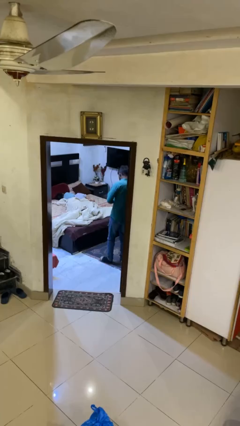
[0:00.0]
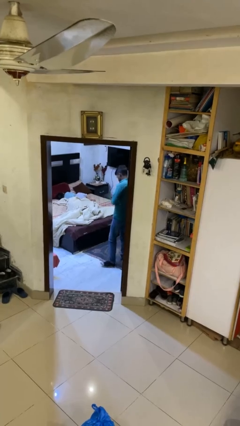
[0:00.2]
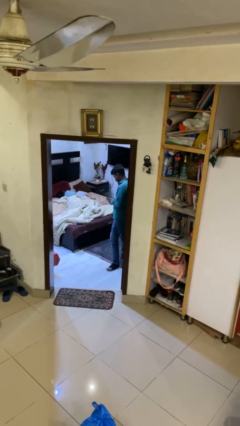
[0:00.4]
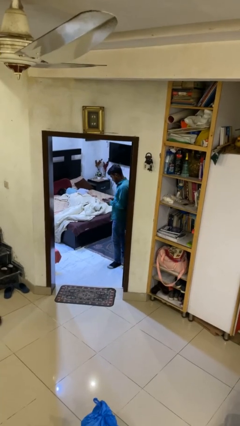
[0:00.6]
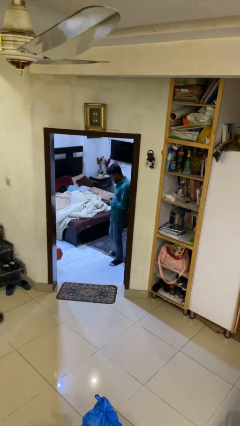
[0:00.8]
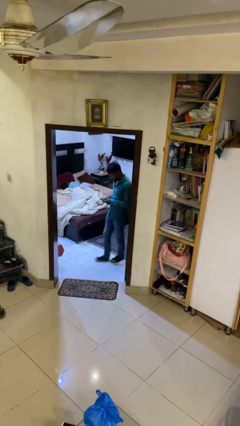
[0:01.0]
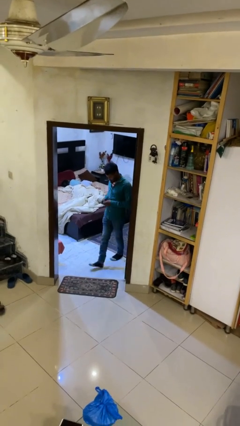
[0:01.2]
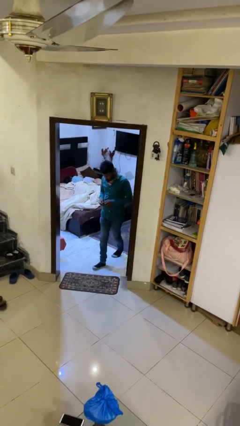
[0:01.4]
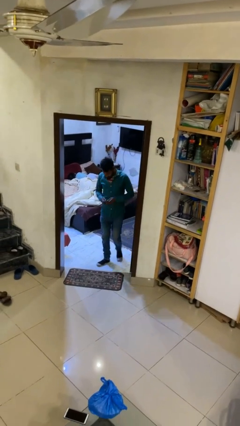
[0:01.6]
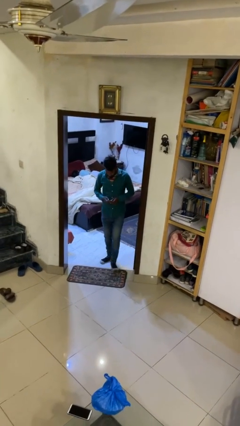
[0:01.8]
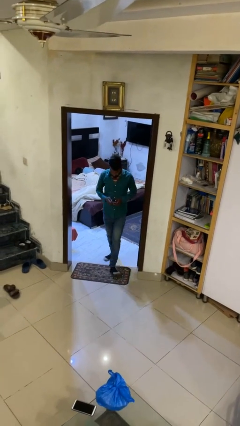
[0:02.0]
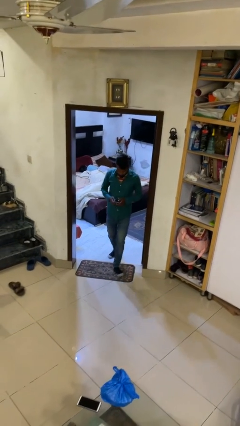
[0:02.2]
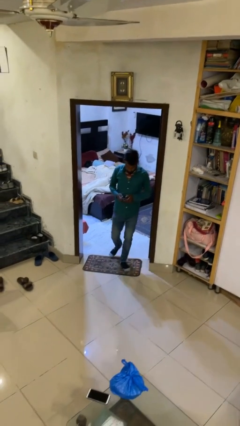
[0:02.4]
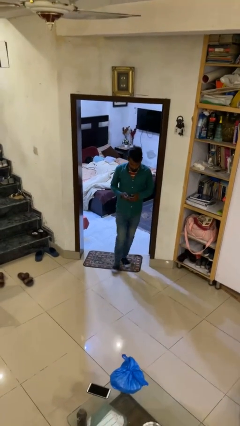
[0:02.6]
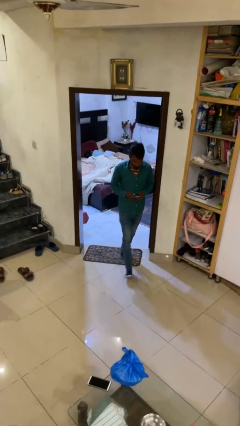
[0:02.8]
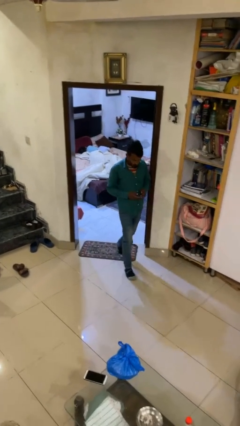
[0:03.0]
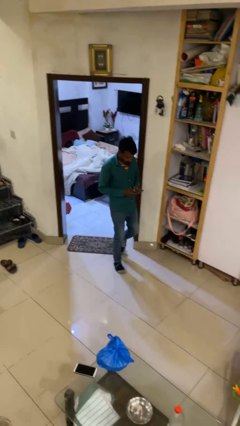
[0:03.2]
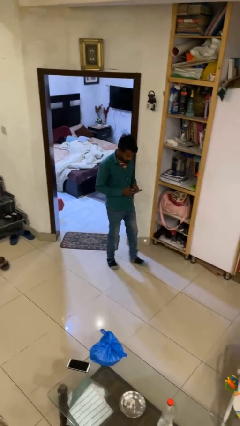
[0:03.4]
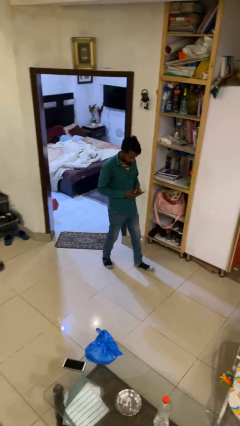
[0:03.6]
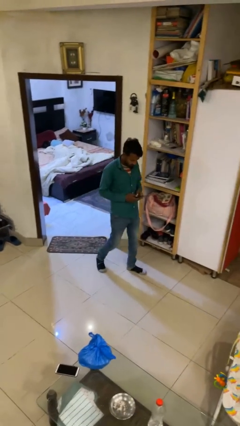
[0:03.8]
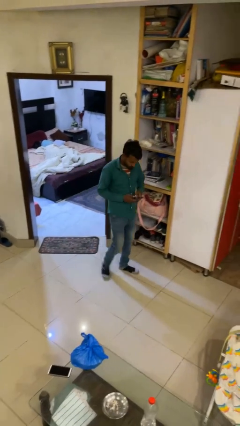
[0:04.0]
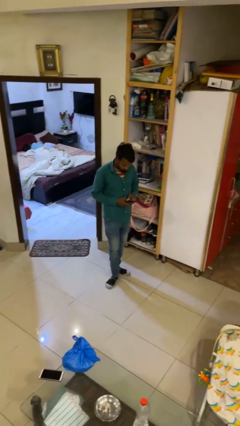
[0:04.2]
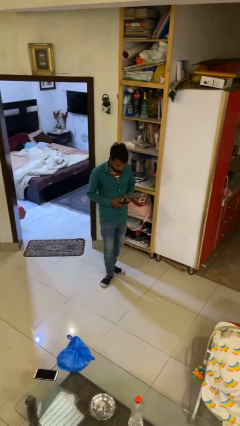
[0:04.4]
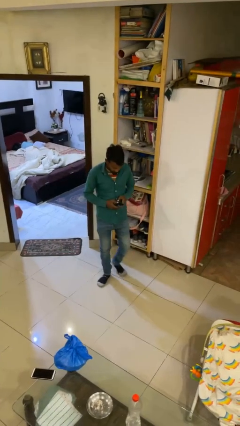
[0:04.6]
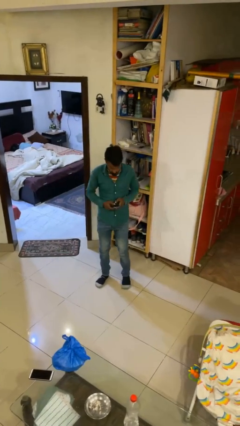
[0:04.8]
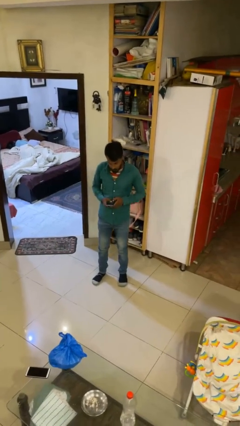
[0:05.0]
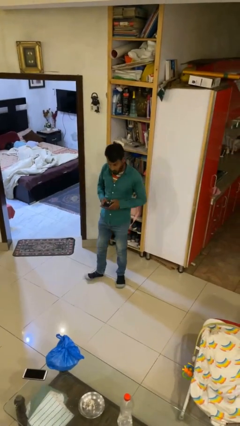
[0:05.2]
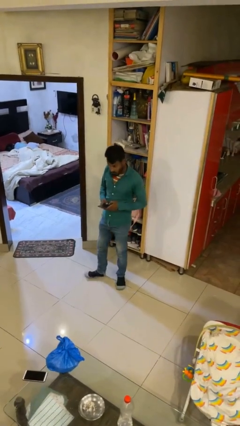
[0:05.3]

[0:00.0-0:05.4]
person enters scene through structure

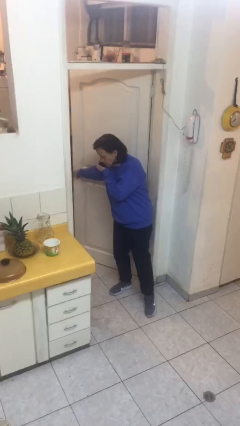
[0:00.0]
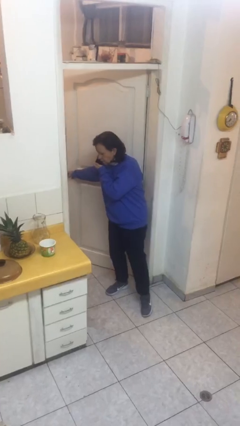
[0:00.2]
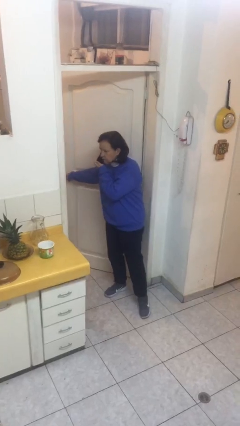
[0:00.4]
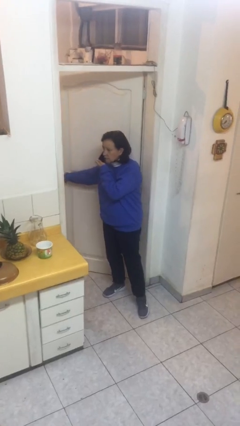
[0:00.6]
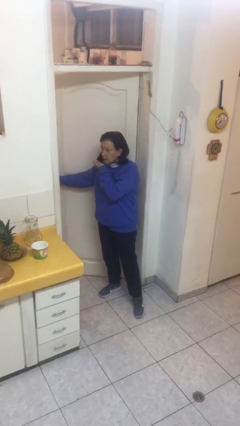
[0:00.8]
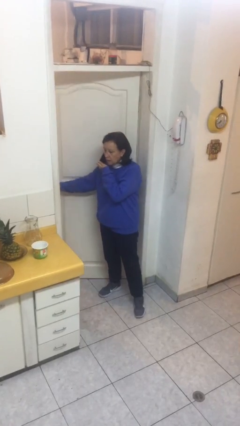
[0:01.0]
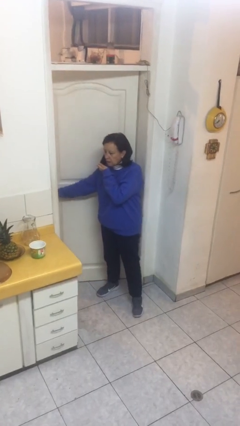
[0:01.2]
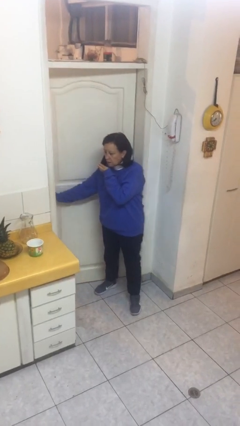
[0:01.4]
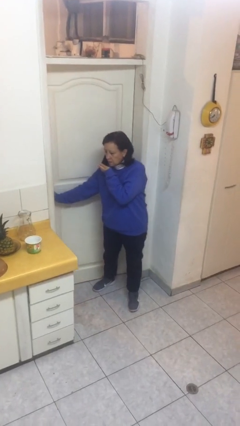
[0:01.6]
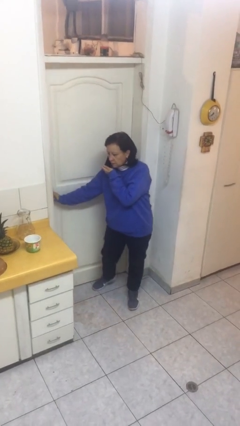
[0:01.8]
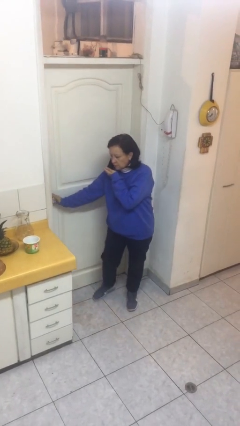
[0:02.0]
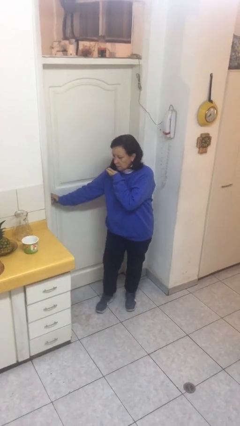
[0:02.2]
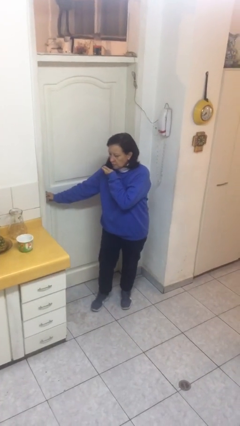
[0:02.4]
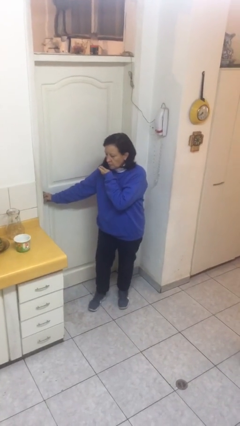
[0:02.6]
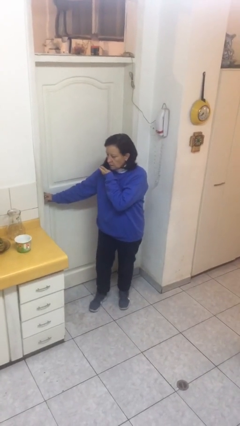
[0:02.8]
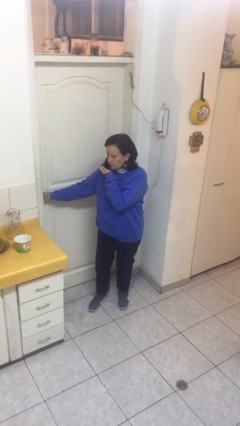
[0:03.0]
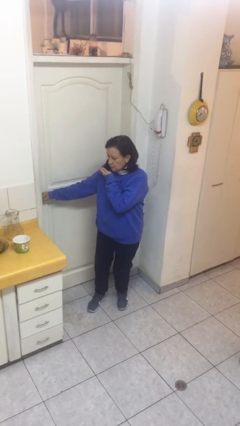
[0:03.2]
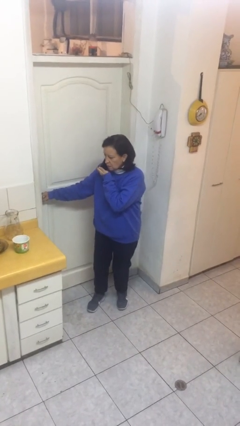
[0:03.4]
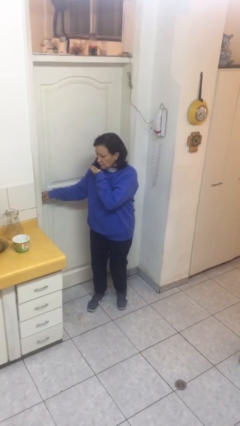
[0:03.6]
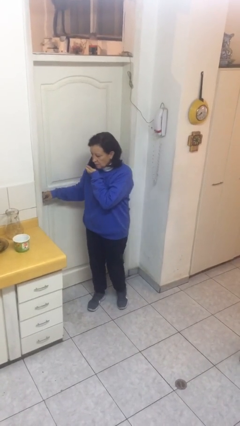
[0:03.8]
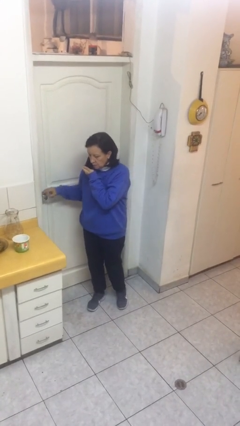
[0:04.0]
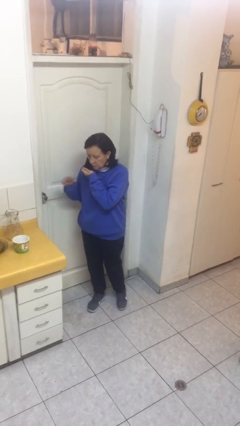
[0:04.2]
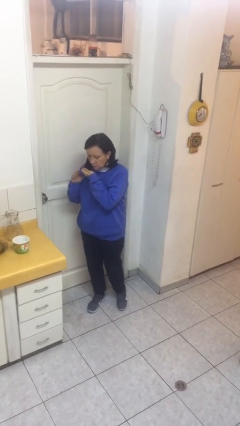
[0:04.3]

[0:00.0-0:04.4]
person closes facility door

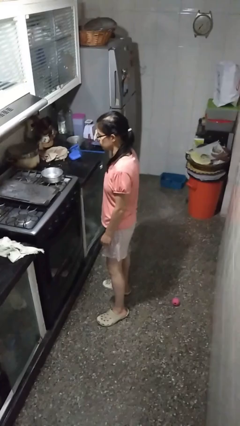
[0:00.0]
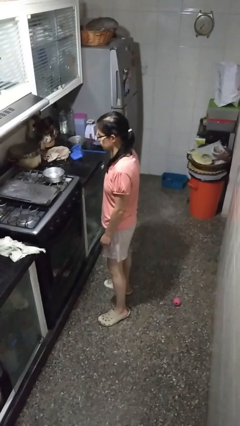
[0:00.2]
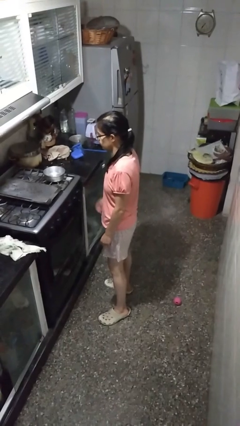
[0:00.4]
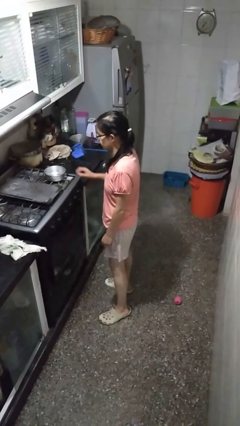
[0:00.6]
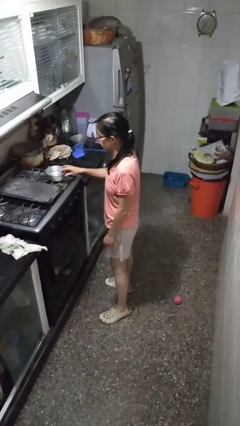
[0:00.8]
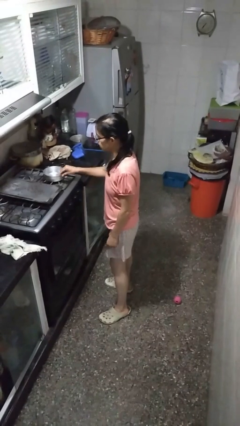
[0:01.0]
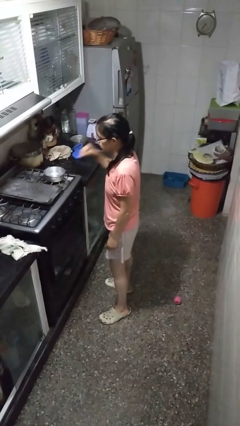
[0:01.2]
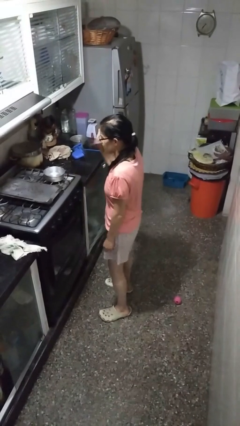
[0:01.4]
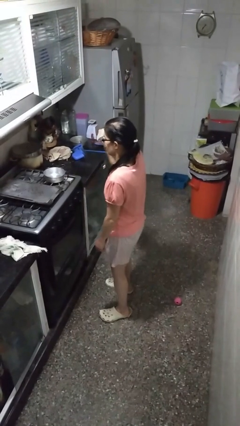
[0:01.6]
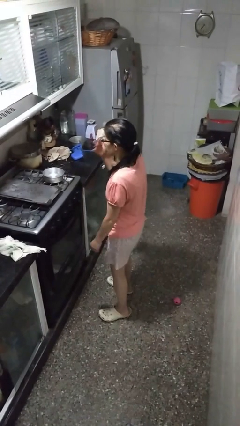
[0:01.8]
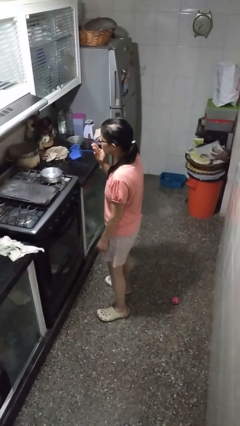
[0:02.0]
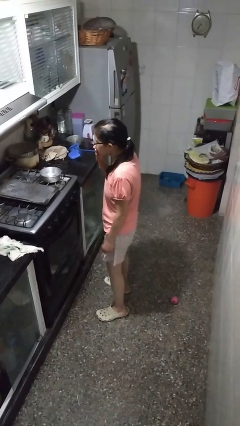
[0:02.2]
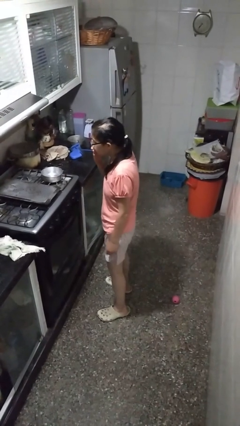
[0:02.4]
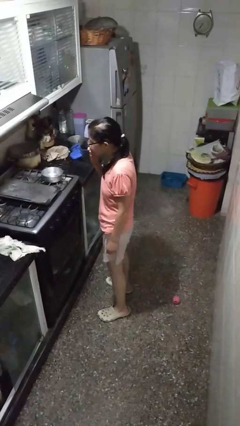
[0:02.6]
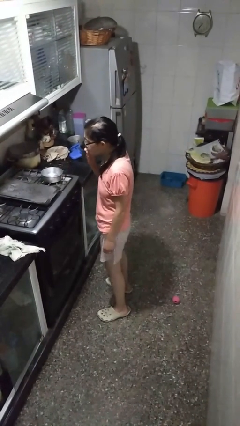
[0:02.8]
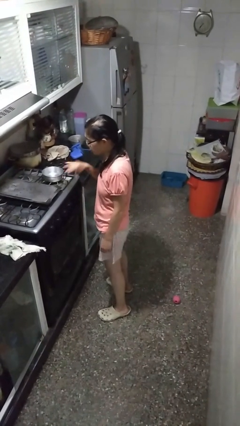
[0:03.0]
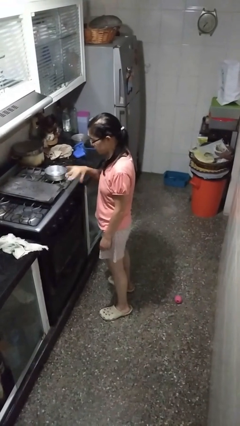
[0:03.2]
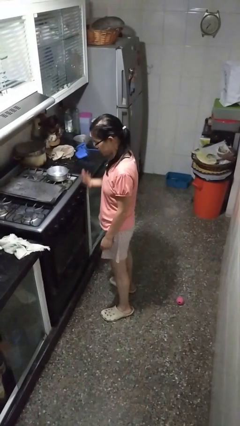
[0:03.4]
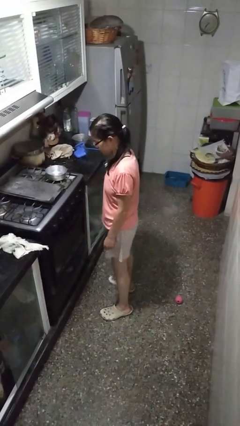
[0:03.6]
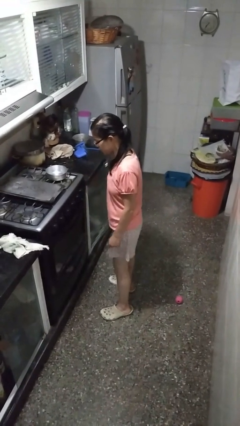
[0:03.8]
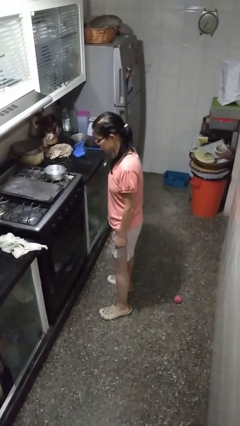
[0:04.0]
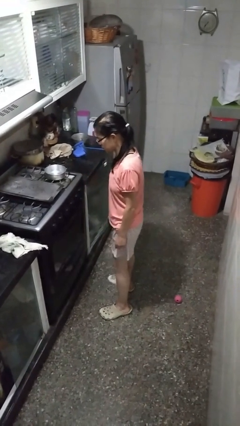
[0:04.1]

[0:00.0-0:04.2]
person burns hand

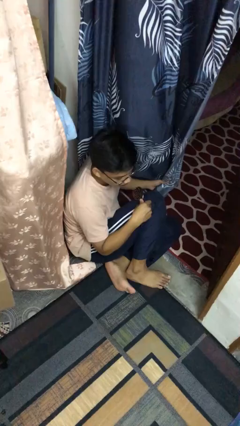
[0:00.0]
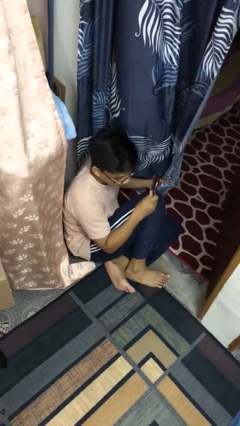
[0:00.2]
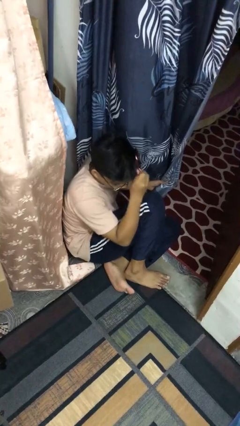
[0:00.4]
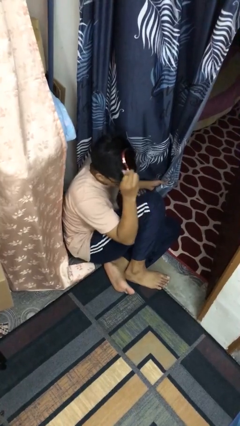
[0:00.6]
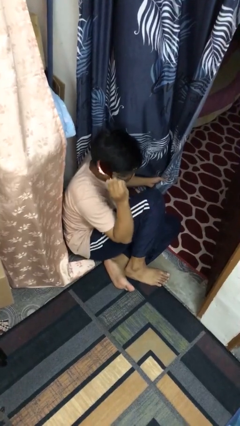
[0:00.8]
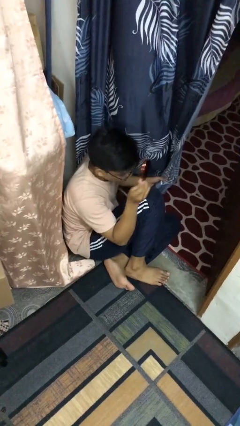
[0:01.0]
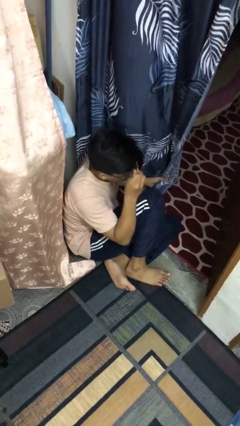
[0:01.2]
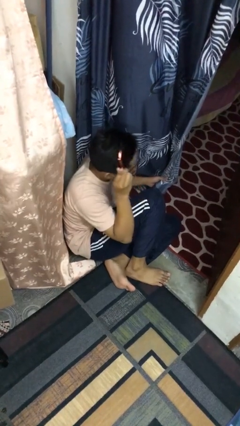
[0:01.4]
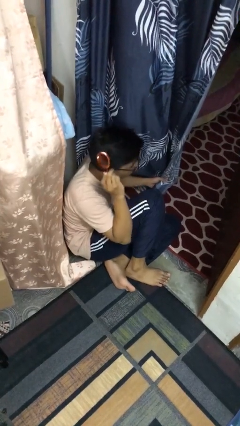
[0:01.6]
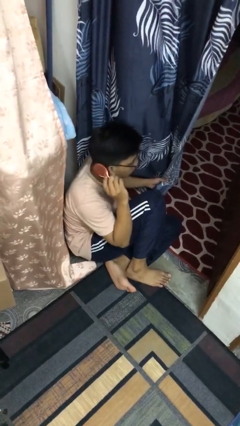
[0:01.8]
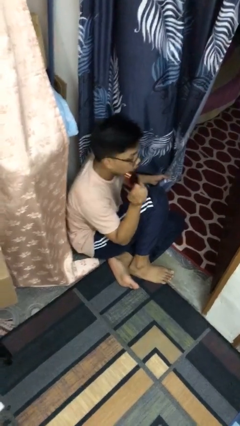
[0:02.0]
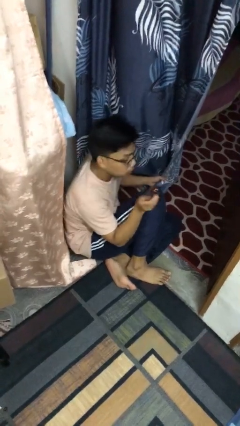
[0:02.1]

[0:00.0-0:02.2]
person brushes hair

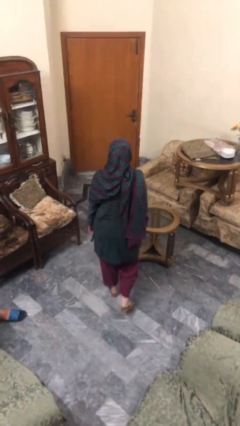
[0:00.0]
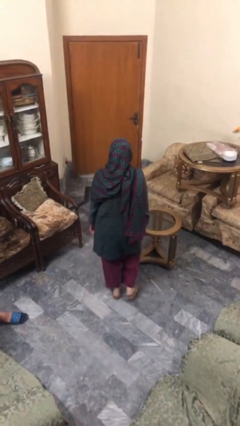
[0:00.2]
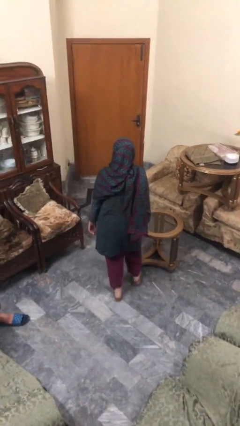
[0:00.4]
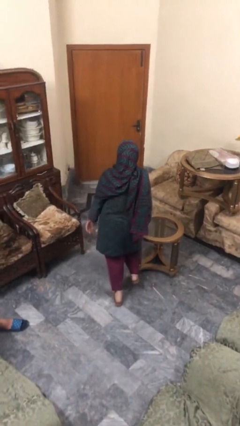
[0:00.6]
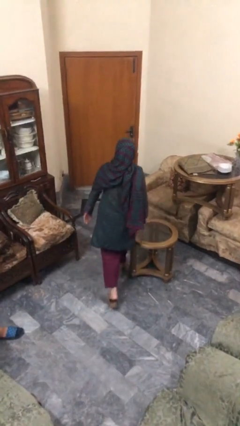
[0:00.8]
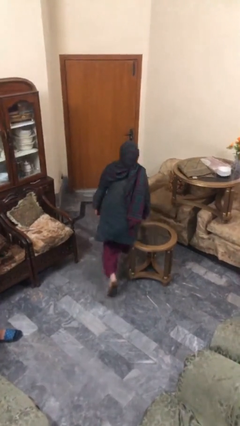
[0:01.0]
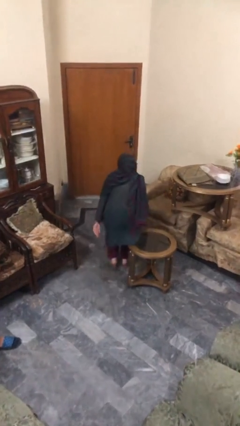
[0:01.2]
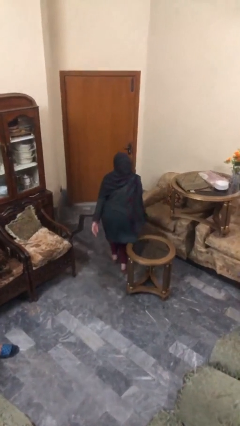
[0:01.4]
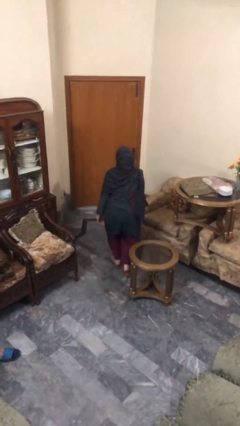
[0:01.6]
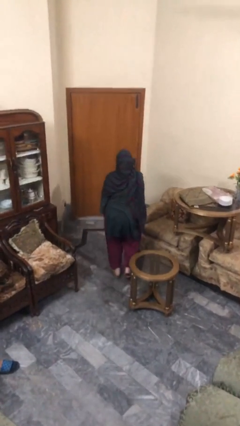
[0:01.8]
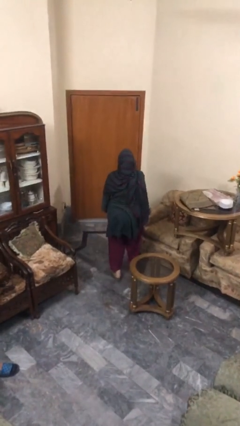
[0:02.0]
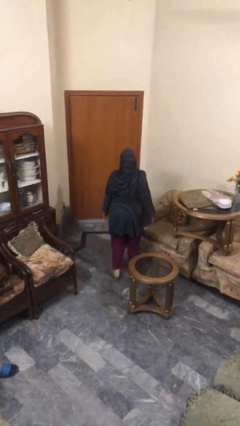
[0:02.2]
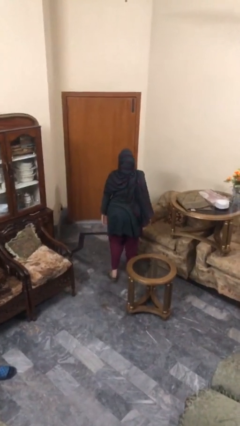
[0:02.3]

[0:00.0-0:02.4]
person bumps into table
